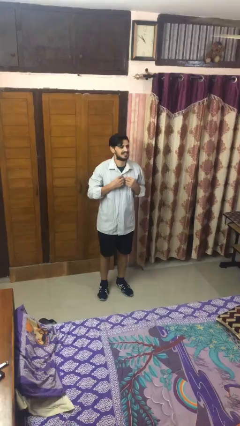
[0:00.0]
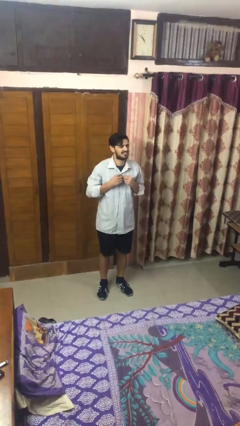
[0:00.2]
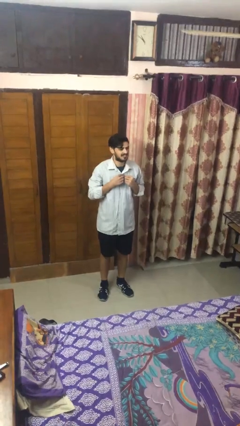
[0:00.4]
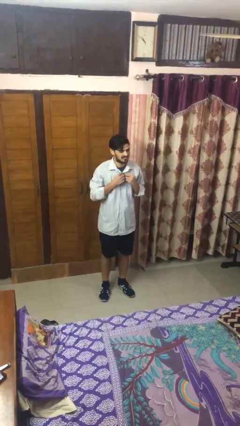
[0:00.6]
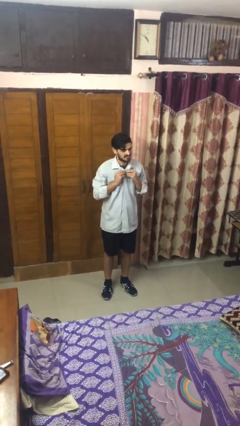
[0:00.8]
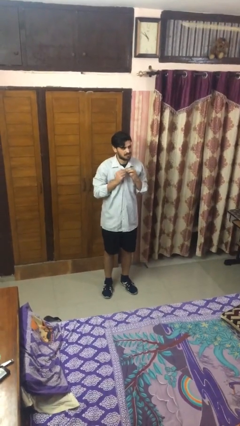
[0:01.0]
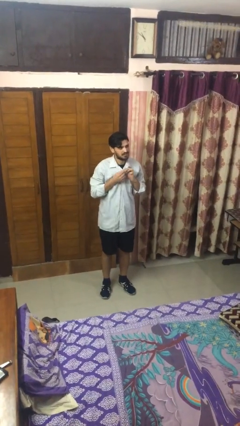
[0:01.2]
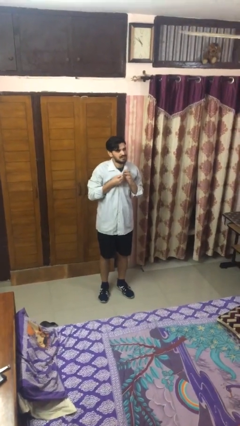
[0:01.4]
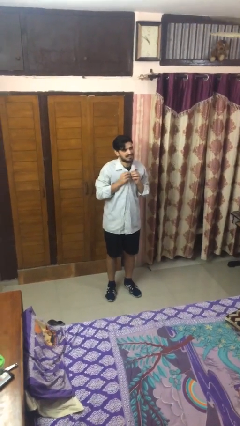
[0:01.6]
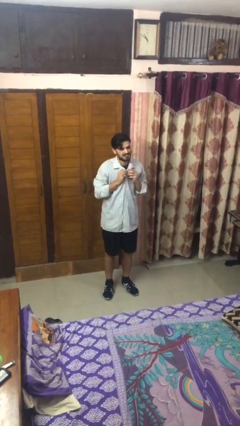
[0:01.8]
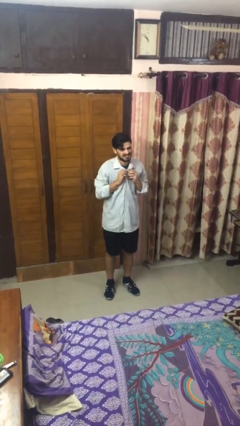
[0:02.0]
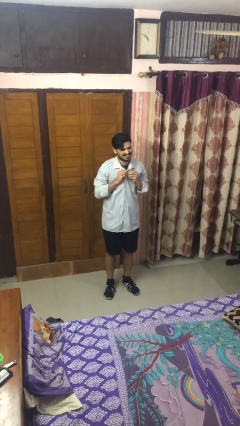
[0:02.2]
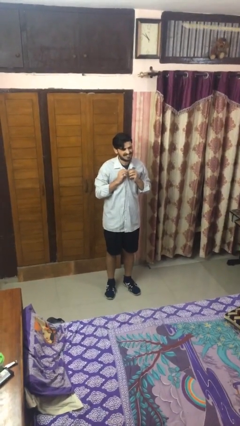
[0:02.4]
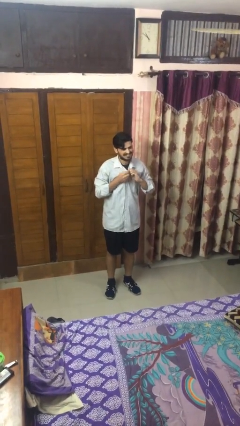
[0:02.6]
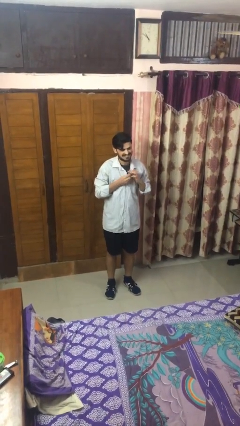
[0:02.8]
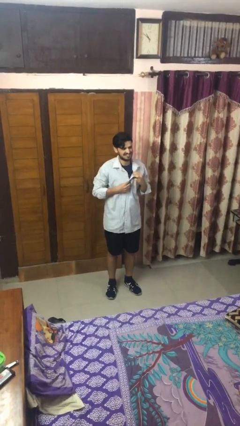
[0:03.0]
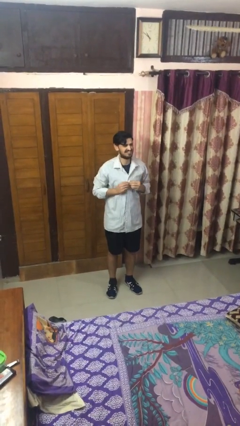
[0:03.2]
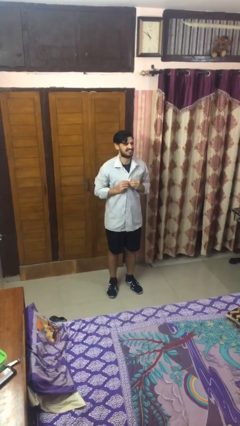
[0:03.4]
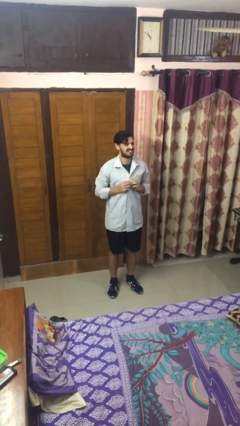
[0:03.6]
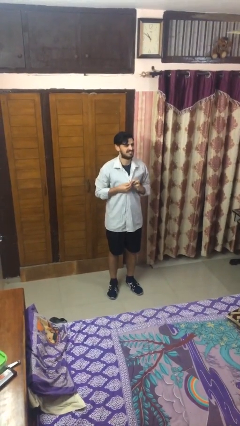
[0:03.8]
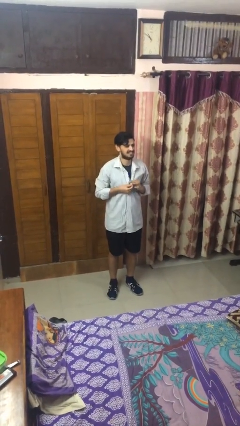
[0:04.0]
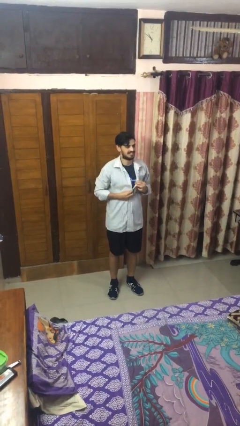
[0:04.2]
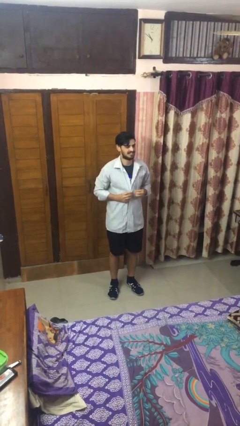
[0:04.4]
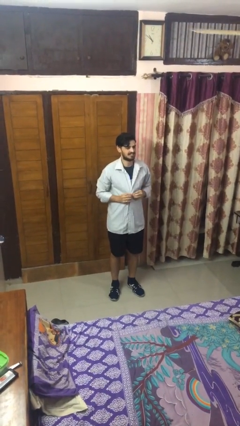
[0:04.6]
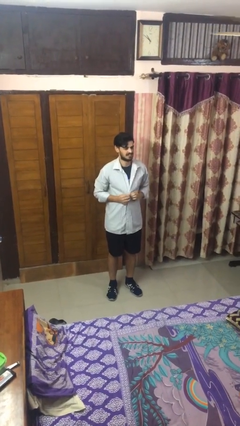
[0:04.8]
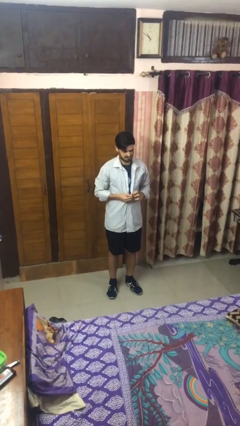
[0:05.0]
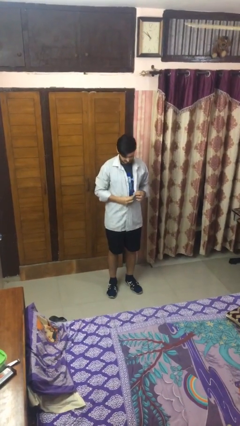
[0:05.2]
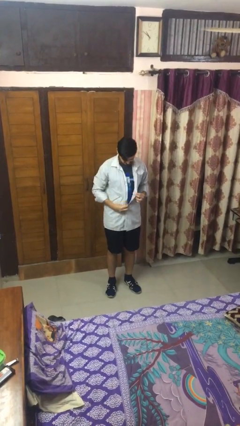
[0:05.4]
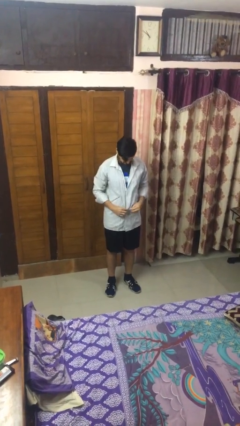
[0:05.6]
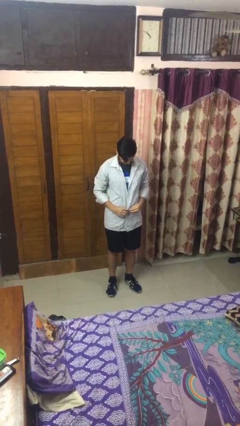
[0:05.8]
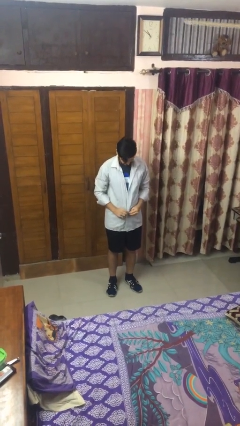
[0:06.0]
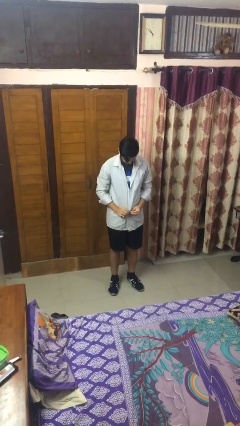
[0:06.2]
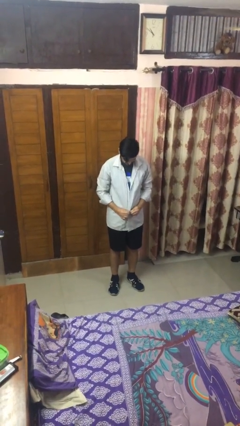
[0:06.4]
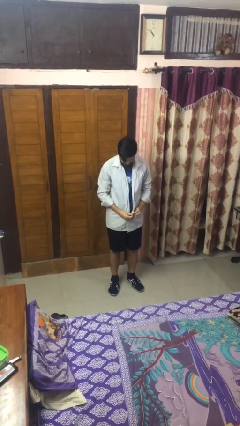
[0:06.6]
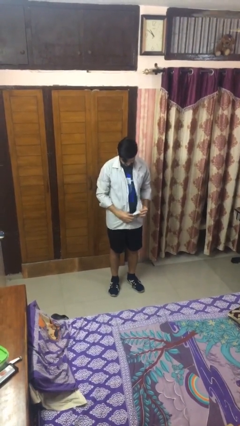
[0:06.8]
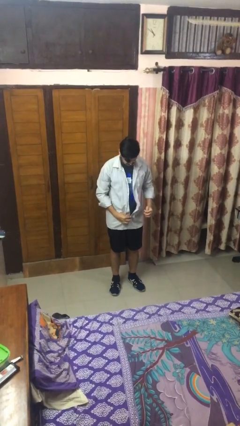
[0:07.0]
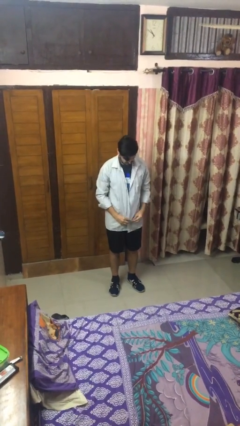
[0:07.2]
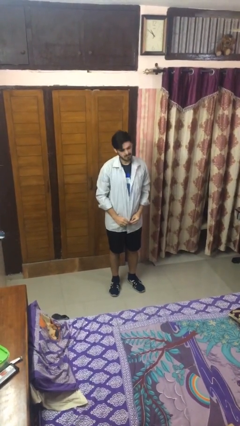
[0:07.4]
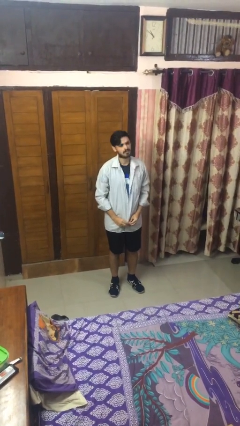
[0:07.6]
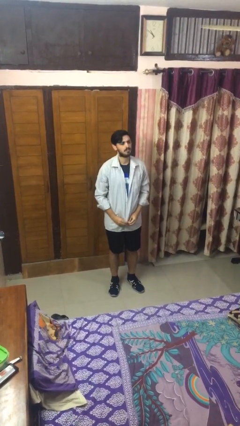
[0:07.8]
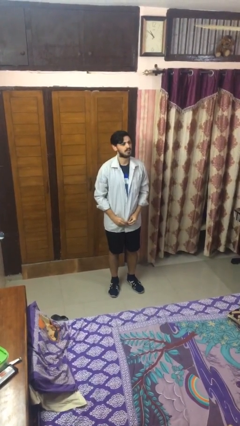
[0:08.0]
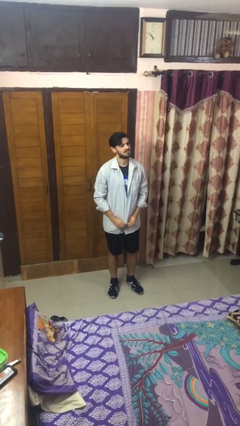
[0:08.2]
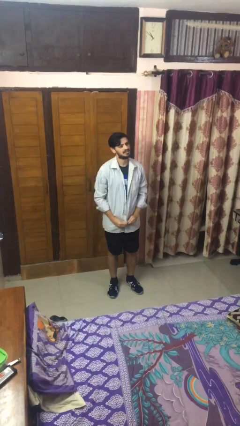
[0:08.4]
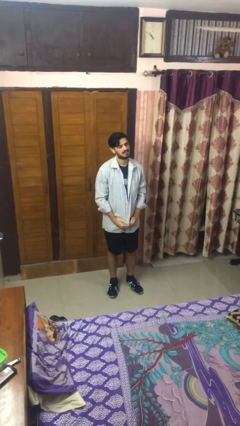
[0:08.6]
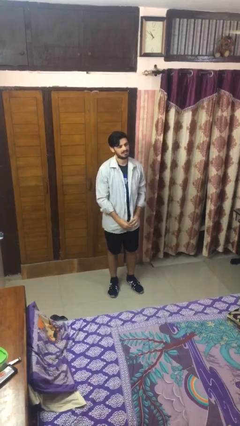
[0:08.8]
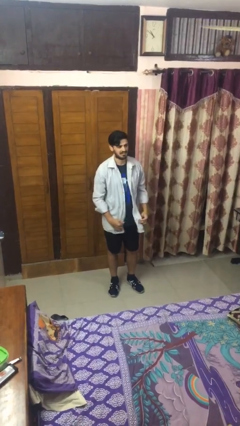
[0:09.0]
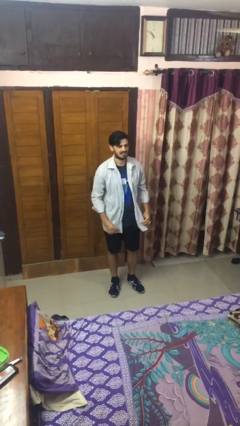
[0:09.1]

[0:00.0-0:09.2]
person unbuttons shirt

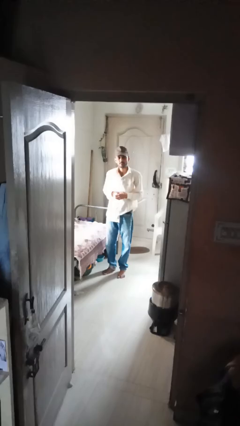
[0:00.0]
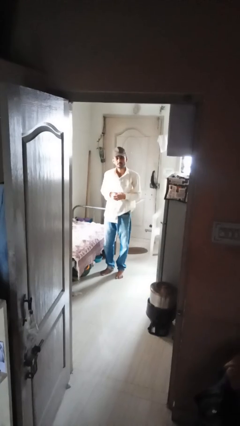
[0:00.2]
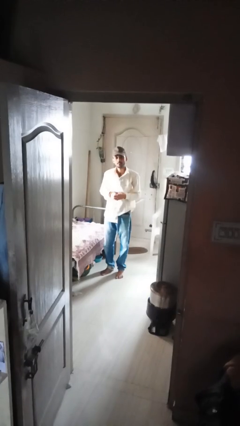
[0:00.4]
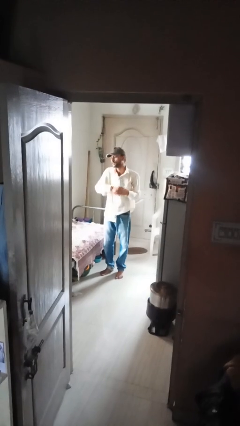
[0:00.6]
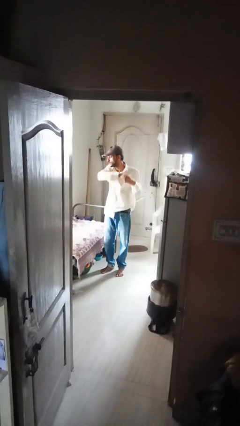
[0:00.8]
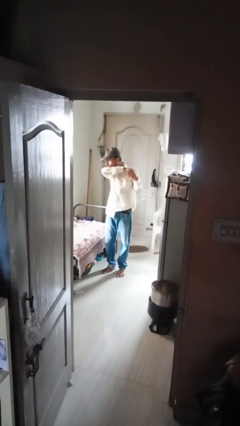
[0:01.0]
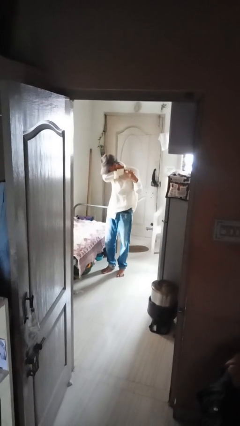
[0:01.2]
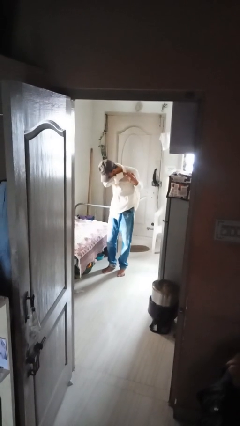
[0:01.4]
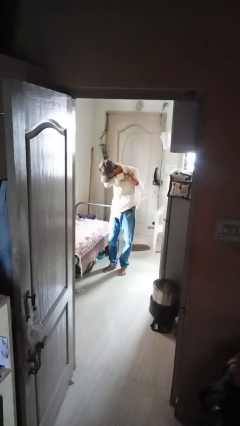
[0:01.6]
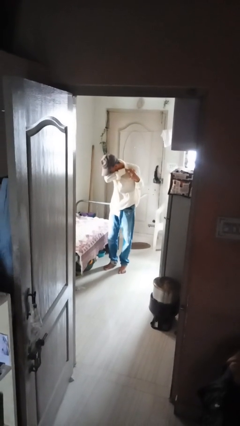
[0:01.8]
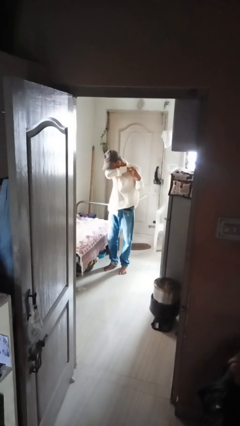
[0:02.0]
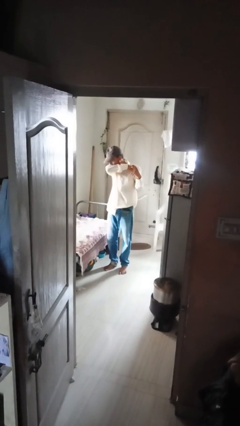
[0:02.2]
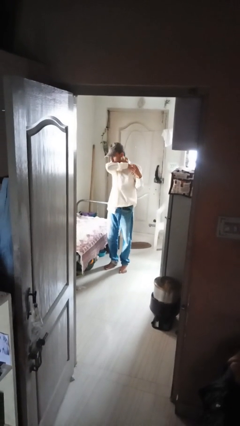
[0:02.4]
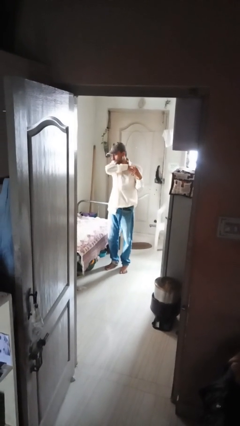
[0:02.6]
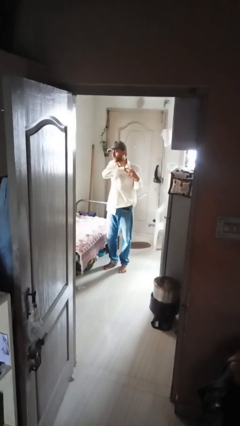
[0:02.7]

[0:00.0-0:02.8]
person sneezes into arm

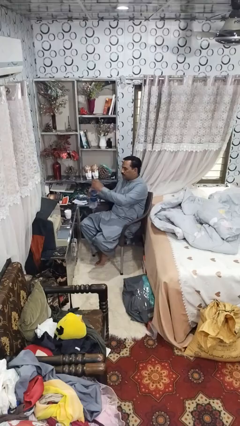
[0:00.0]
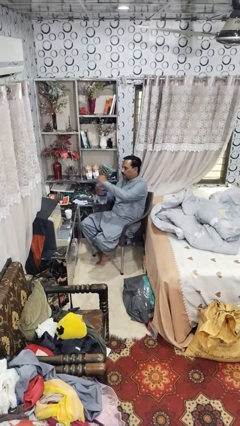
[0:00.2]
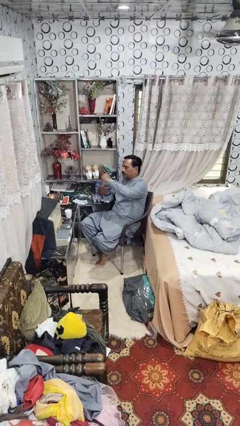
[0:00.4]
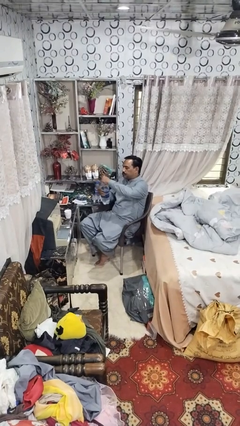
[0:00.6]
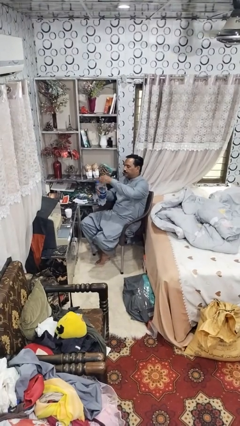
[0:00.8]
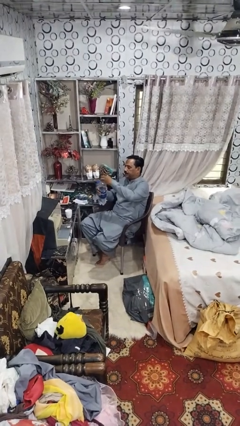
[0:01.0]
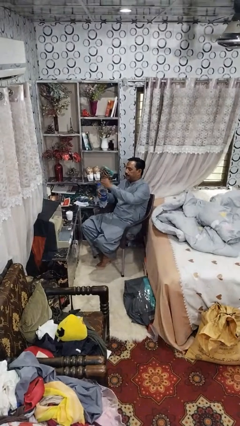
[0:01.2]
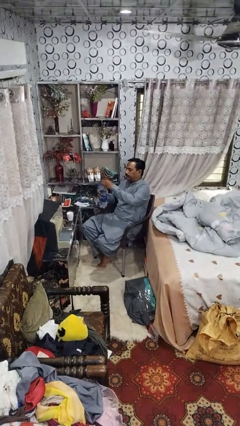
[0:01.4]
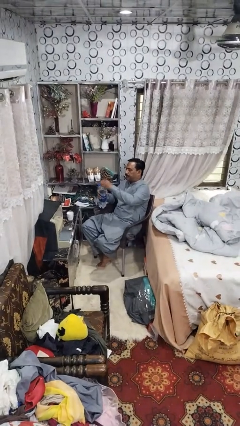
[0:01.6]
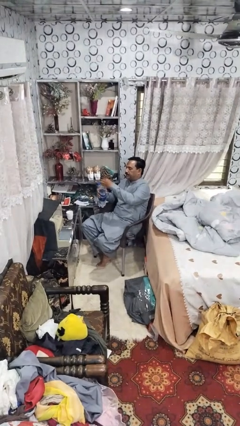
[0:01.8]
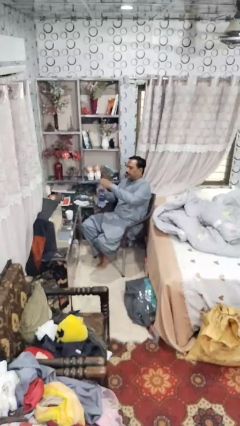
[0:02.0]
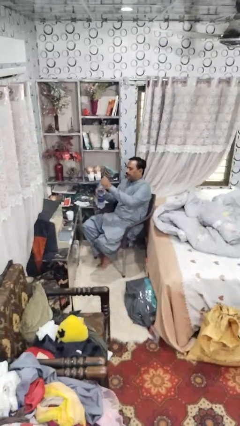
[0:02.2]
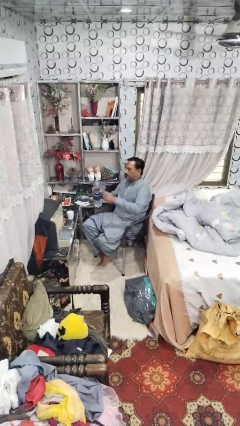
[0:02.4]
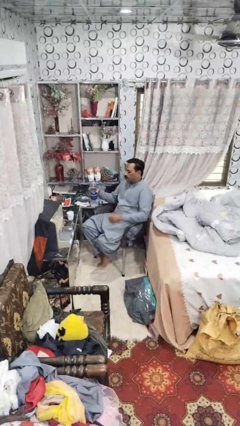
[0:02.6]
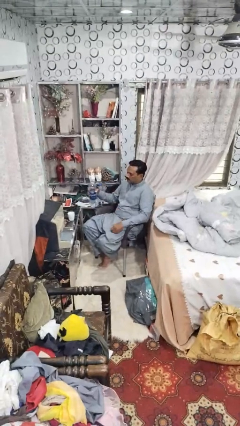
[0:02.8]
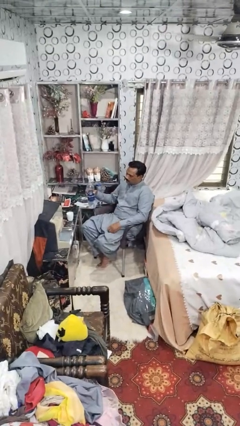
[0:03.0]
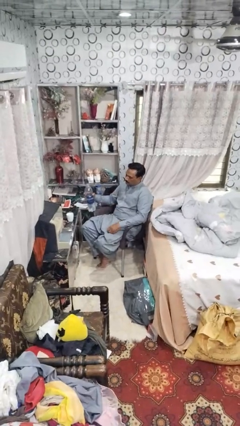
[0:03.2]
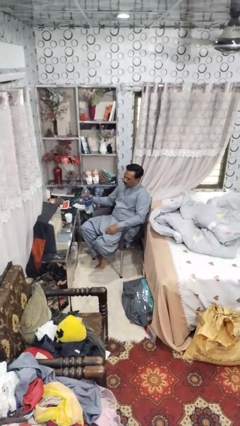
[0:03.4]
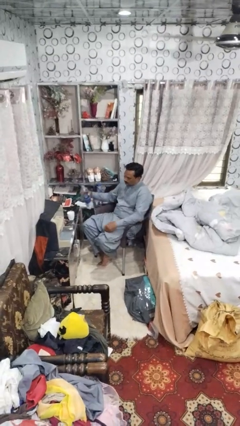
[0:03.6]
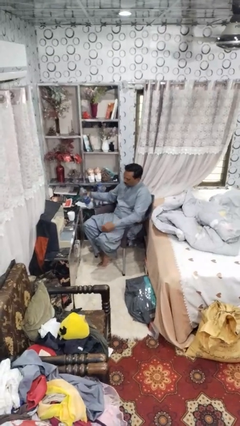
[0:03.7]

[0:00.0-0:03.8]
person unscrews lid from bottle

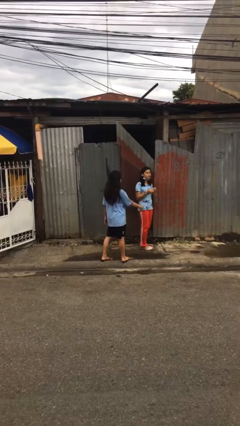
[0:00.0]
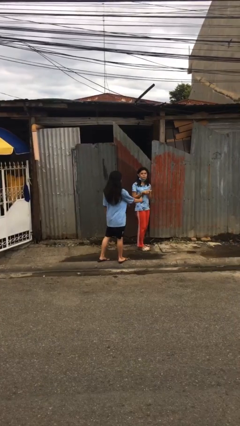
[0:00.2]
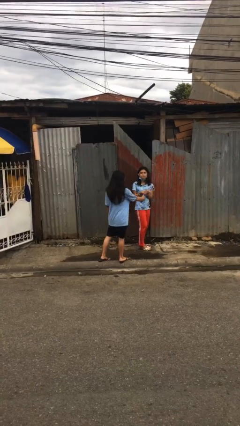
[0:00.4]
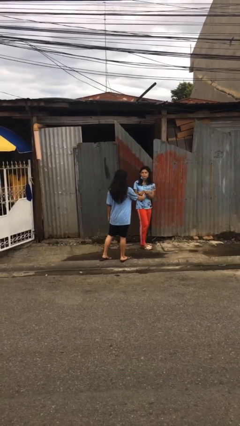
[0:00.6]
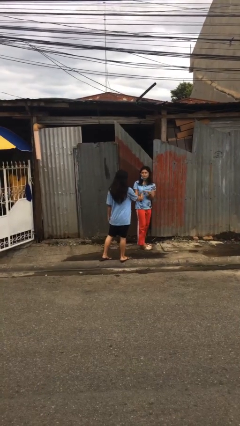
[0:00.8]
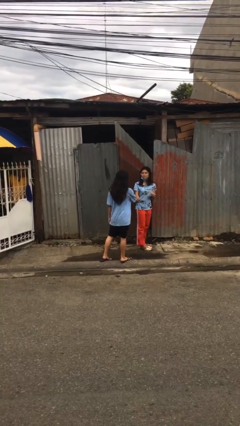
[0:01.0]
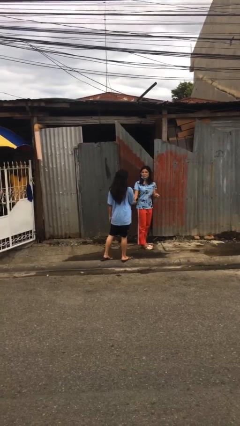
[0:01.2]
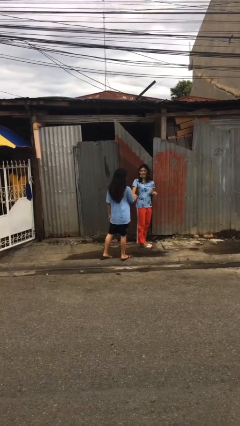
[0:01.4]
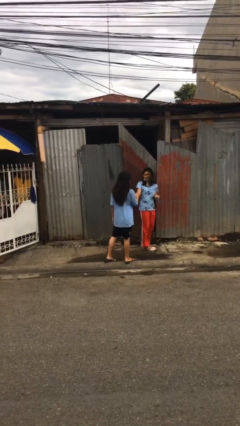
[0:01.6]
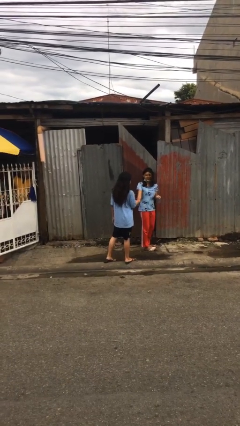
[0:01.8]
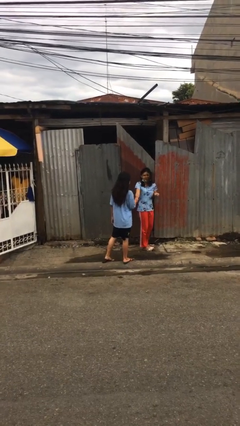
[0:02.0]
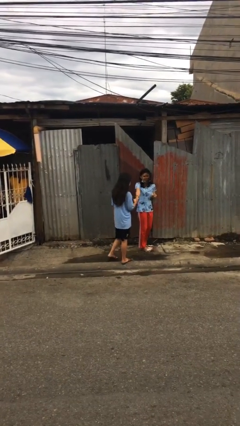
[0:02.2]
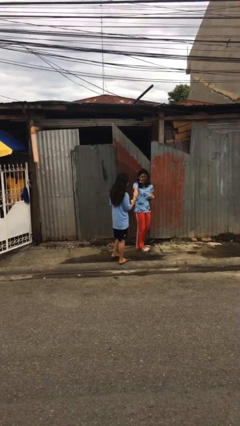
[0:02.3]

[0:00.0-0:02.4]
person shakes hand
